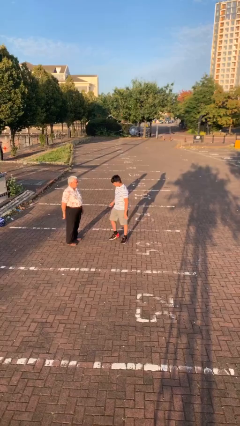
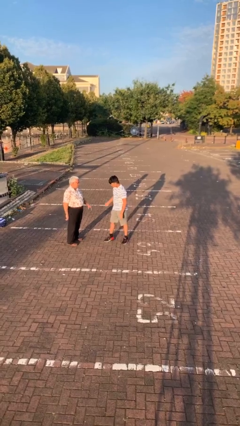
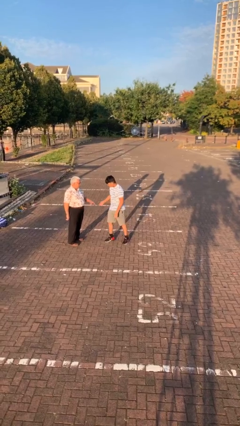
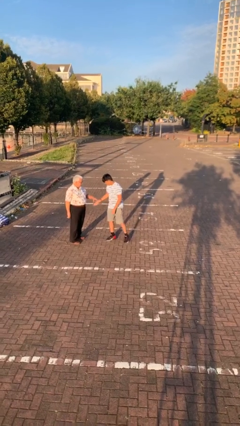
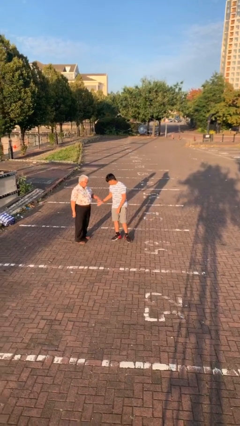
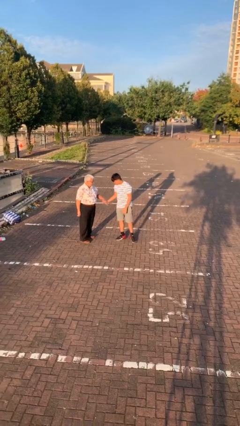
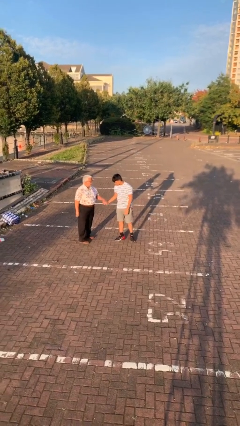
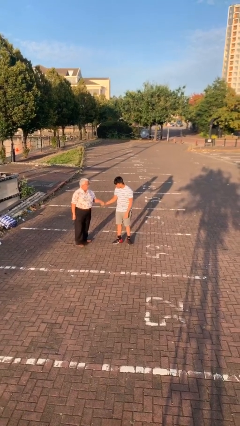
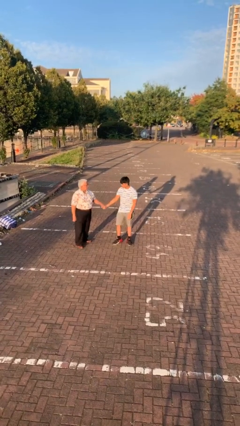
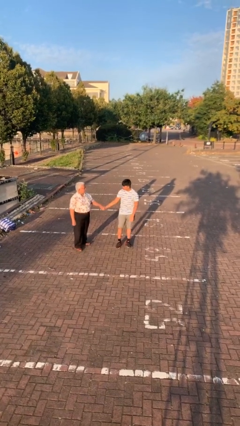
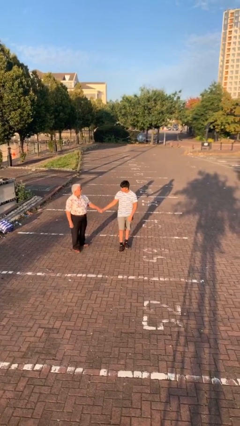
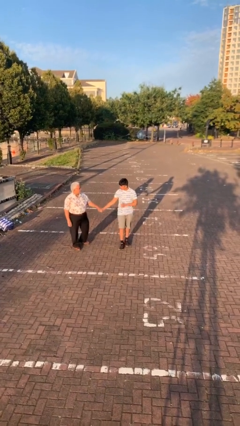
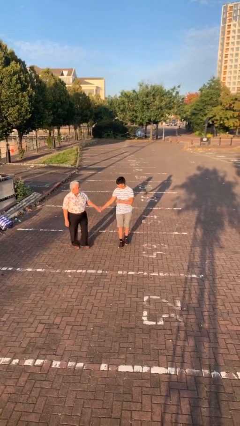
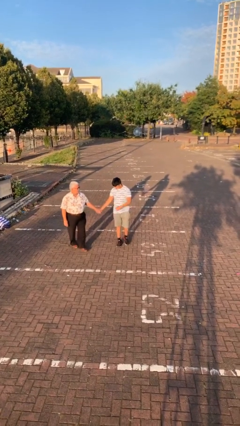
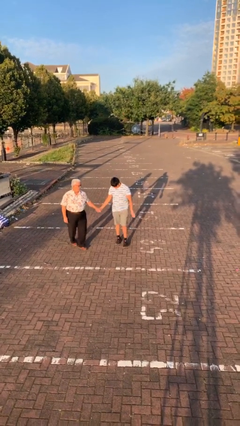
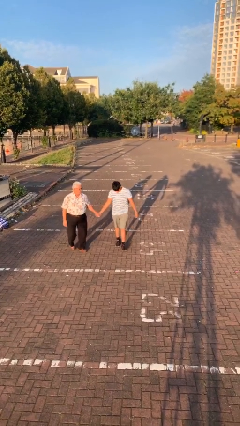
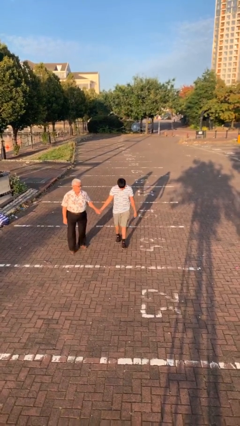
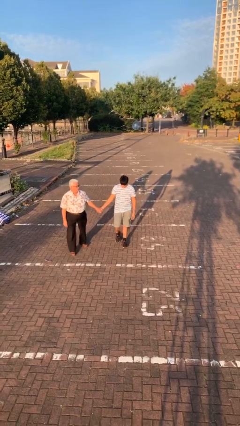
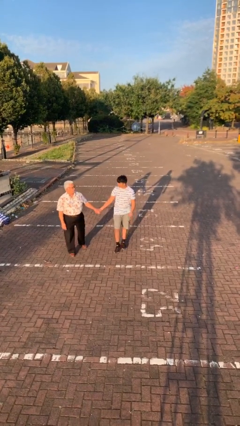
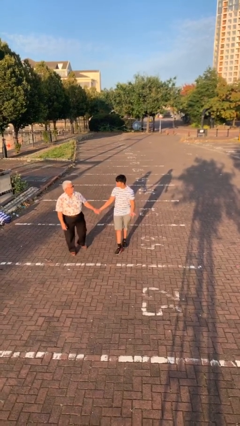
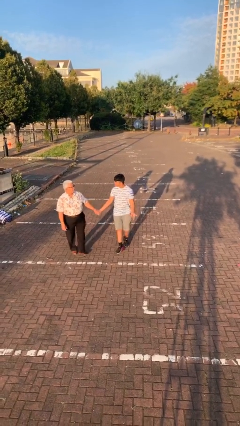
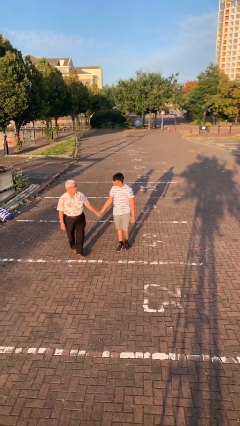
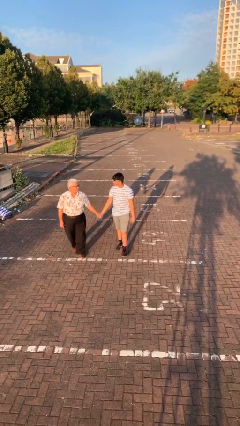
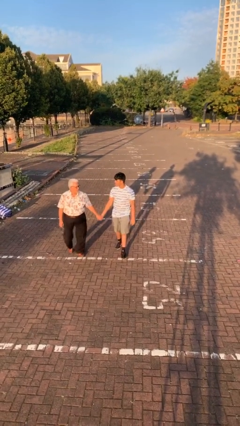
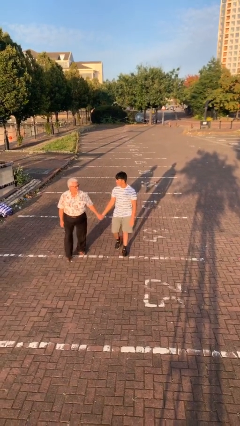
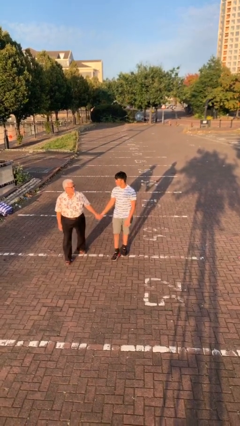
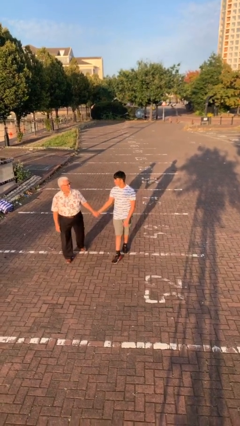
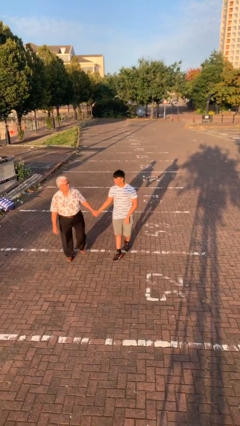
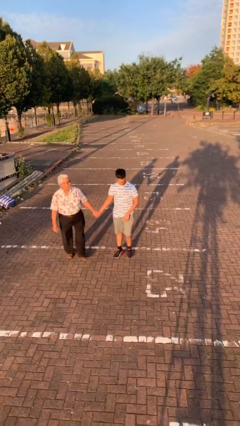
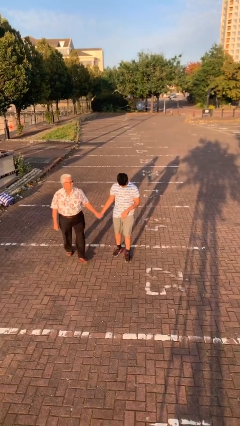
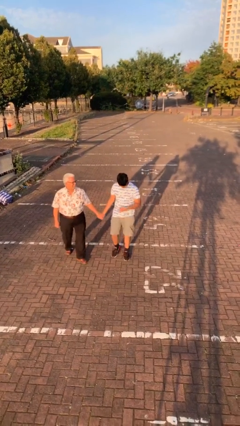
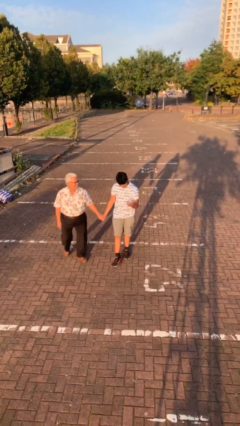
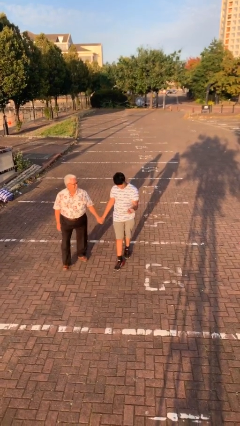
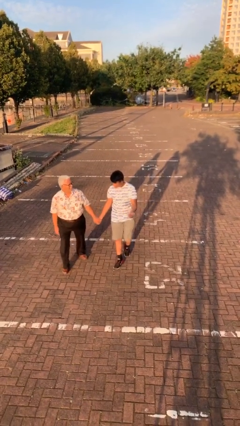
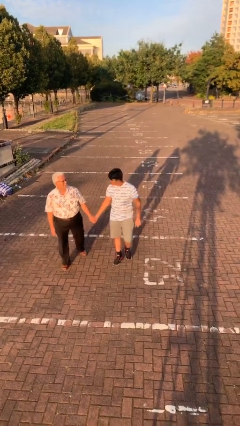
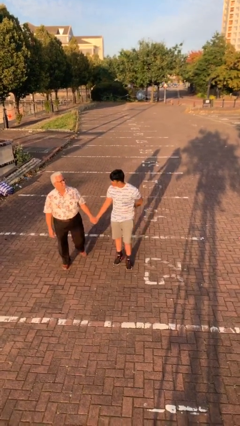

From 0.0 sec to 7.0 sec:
person holds hand

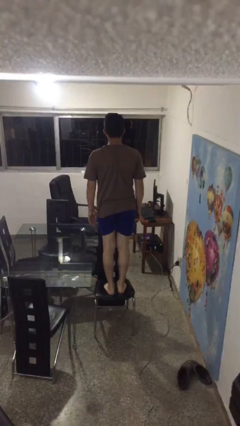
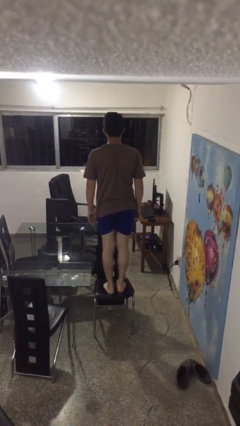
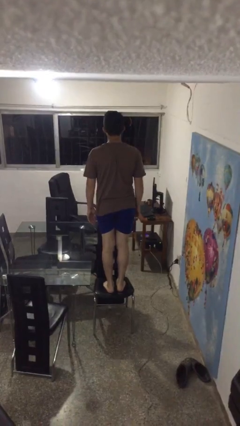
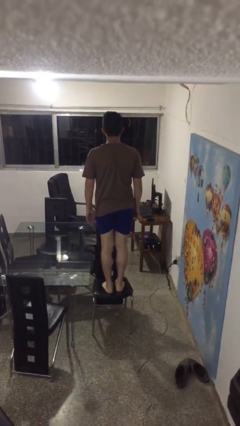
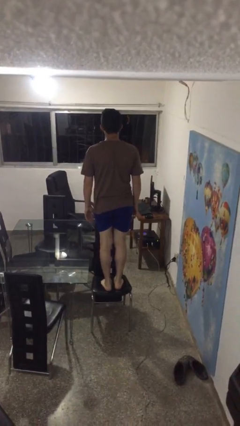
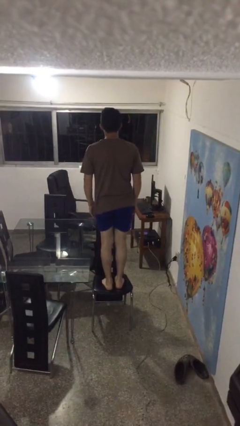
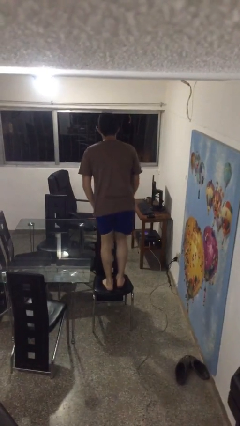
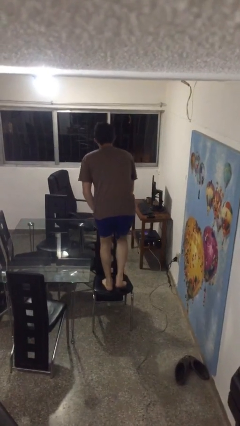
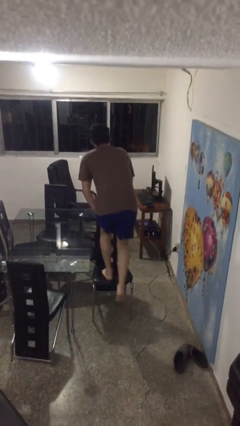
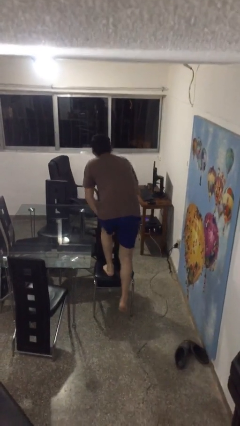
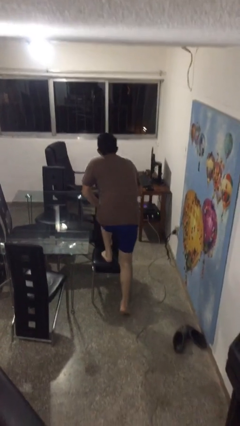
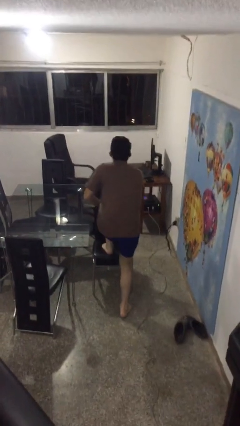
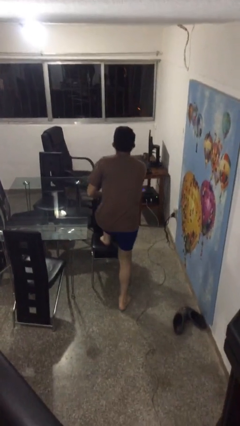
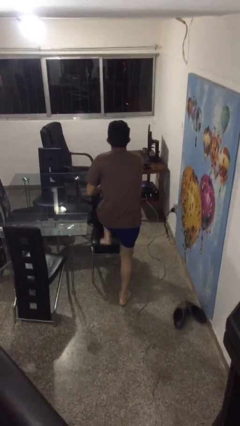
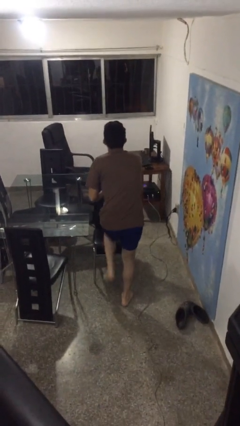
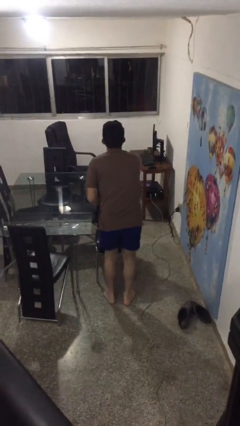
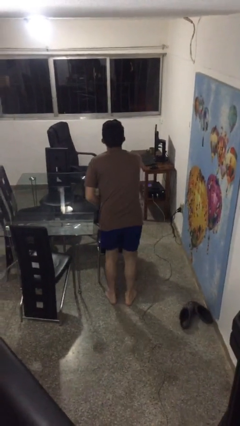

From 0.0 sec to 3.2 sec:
person climbs off chair

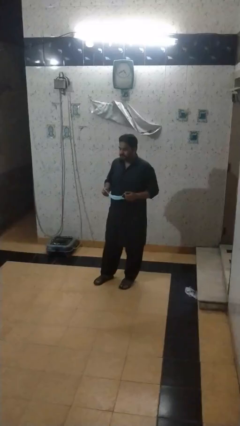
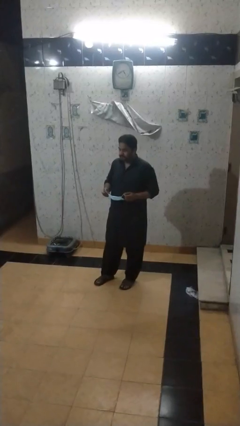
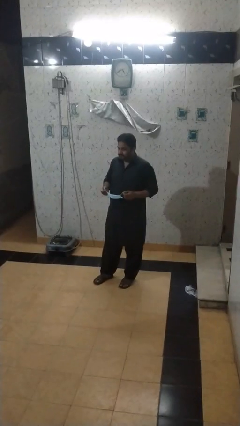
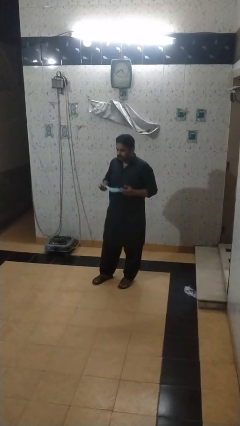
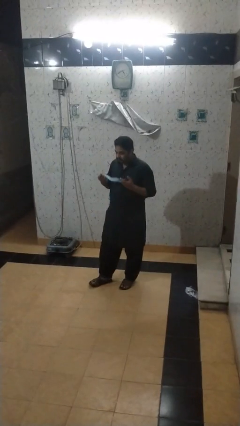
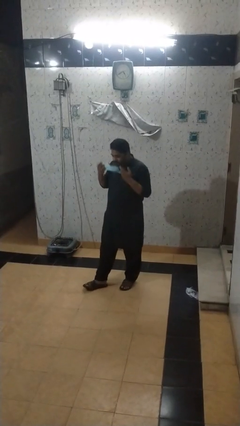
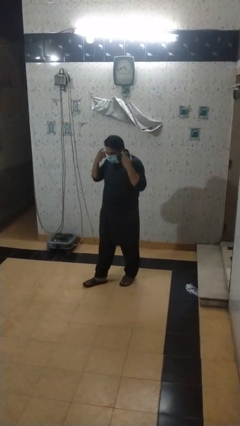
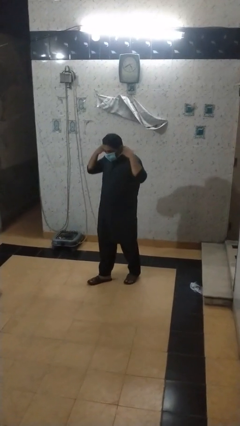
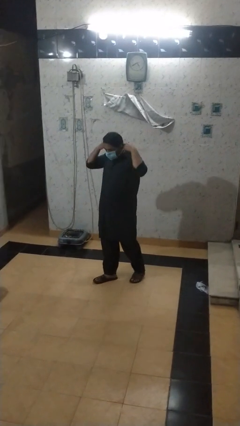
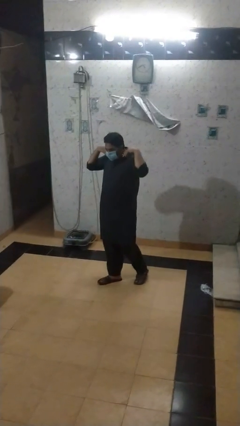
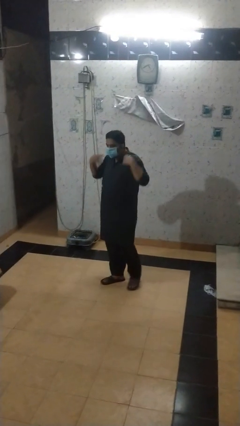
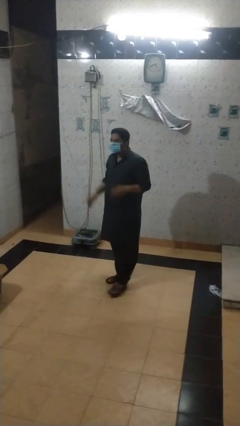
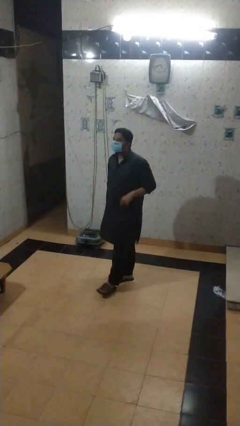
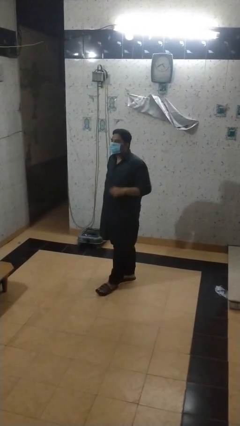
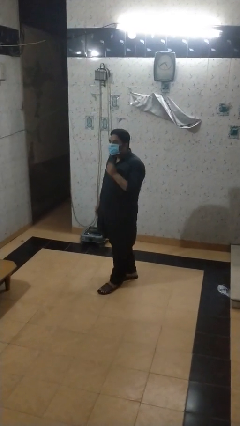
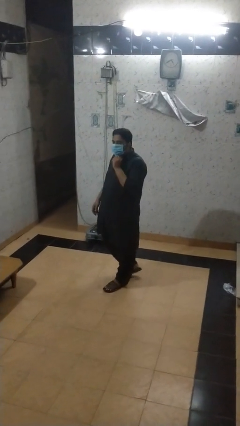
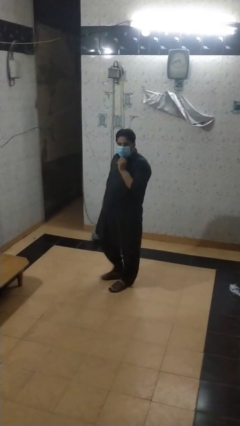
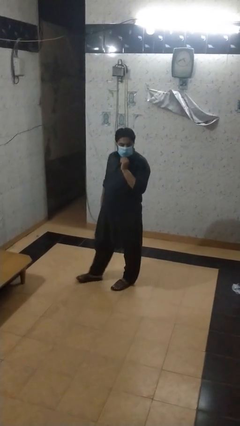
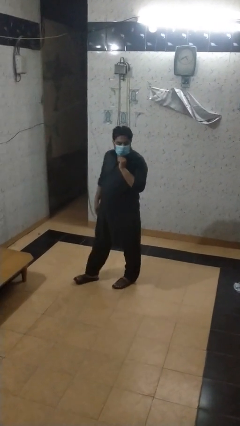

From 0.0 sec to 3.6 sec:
person puts on facemask

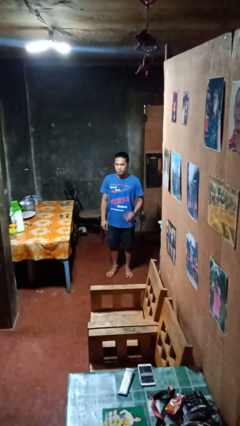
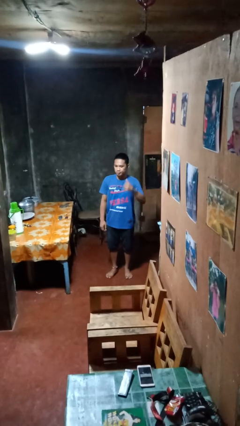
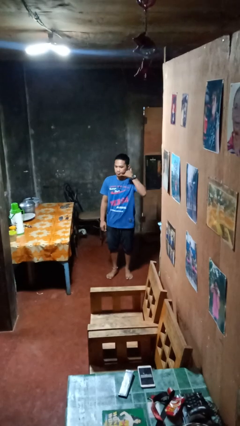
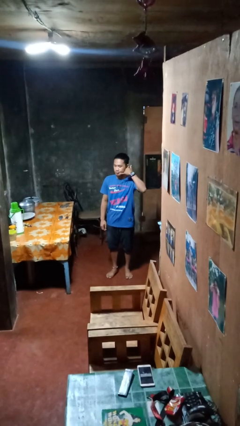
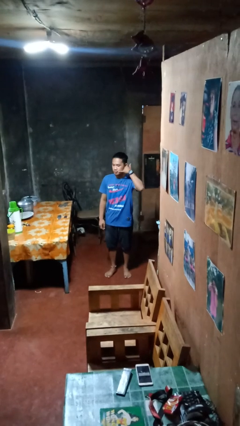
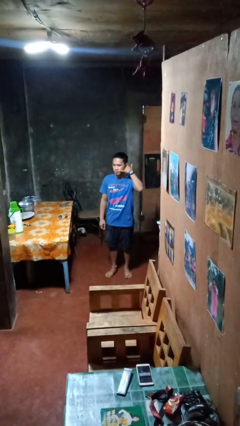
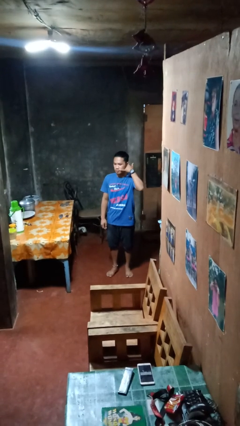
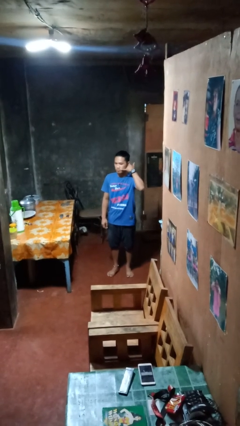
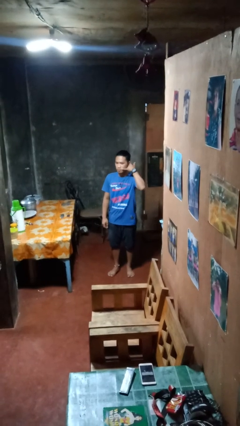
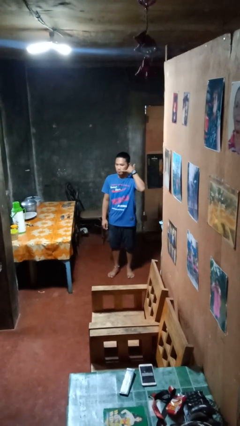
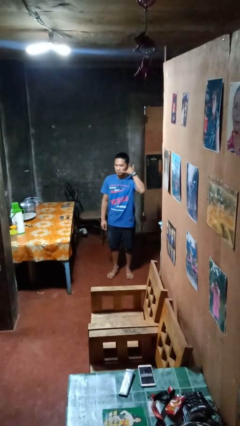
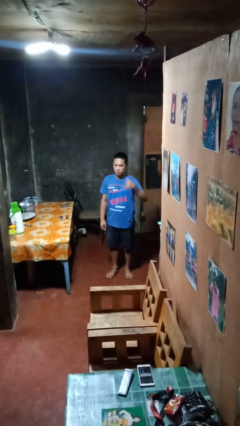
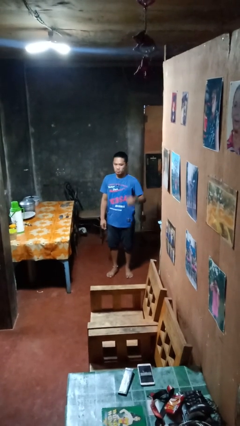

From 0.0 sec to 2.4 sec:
person gestures call me

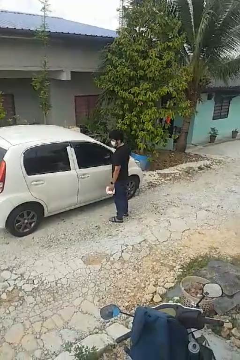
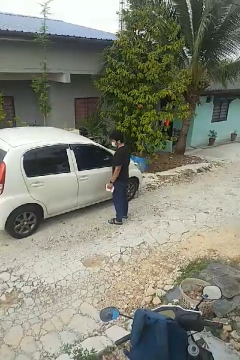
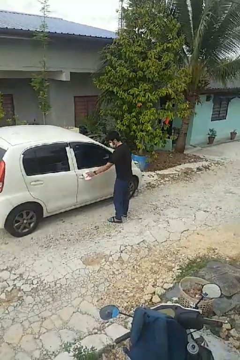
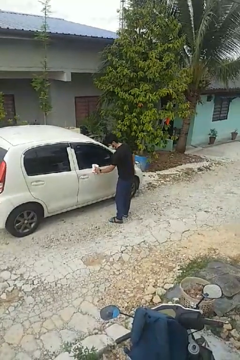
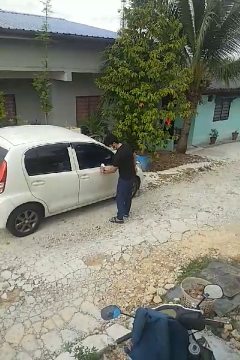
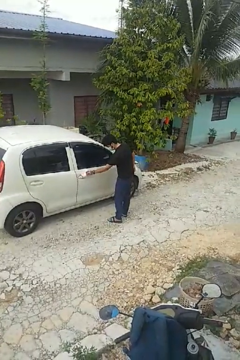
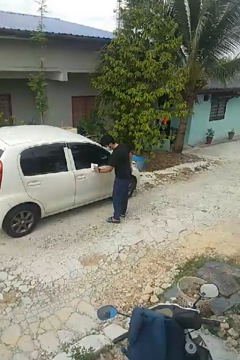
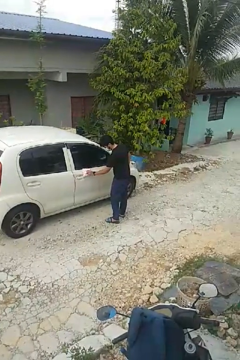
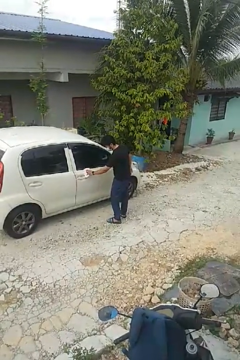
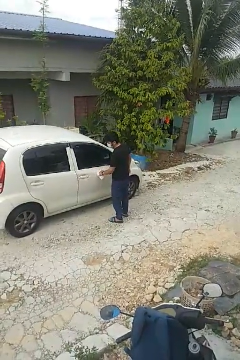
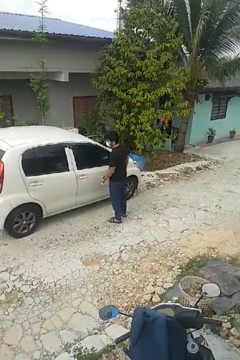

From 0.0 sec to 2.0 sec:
person polishes car with rag
